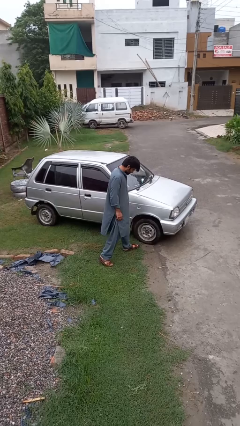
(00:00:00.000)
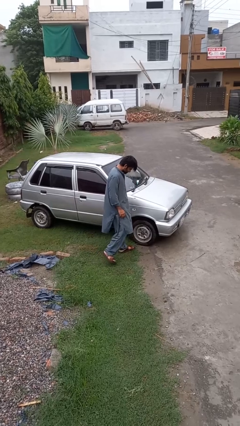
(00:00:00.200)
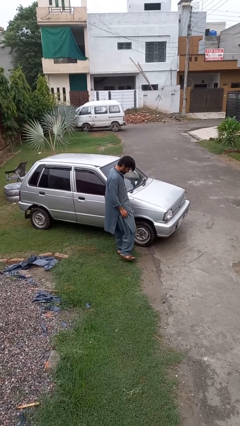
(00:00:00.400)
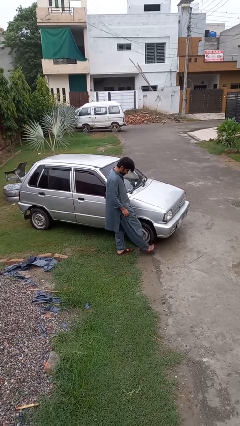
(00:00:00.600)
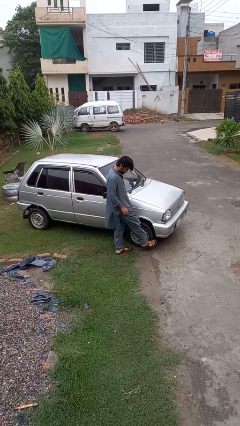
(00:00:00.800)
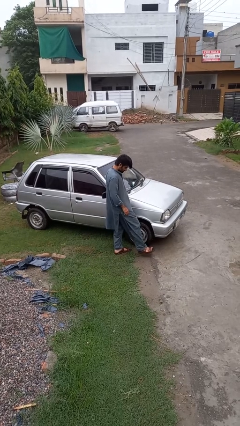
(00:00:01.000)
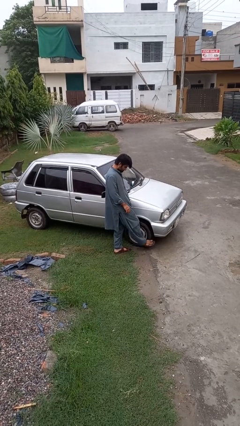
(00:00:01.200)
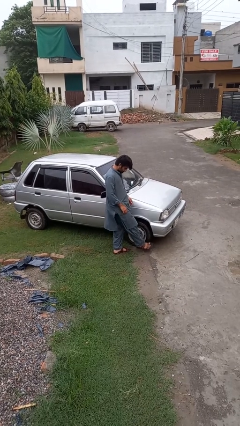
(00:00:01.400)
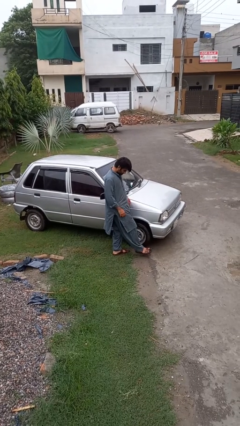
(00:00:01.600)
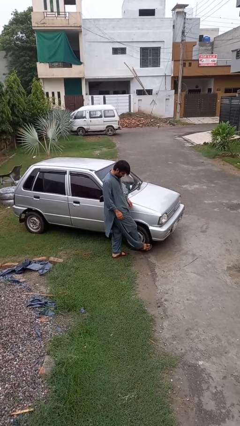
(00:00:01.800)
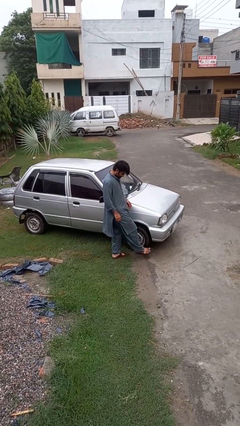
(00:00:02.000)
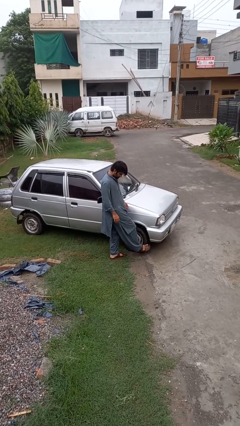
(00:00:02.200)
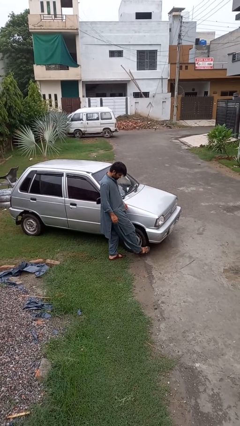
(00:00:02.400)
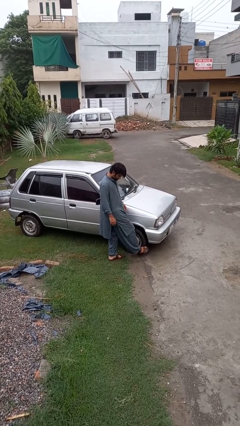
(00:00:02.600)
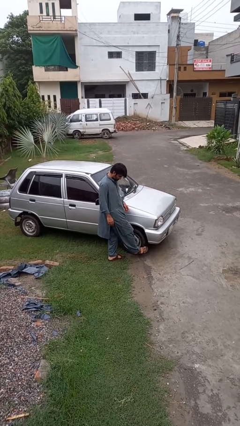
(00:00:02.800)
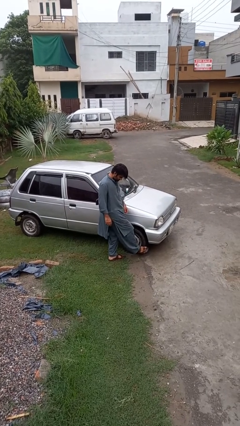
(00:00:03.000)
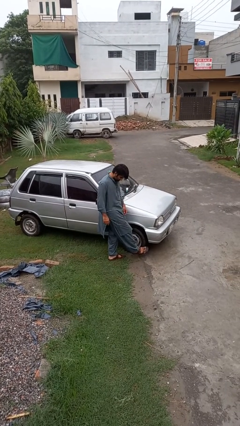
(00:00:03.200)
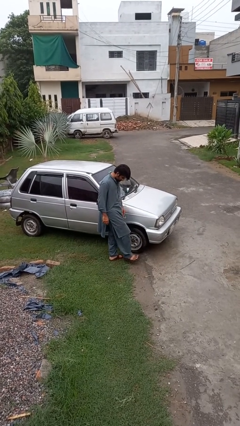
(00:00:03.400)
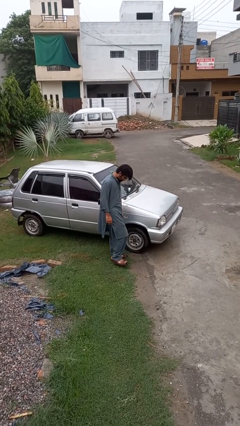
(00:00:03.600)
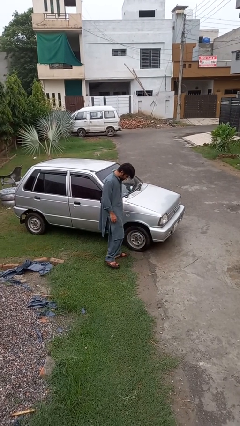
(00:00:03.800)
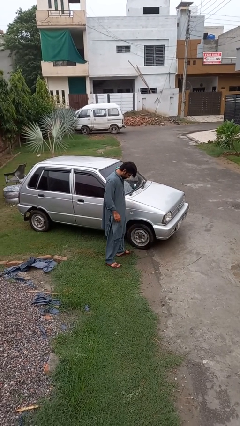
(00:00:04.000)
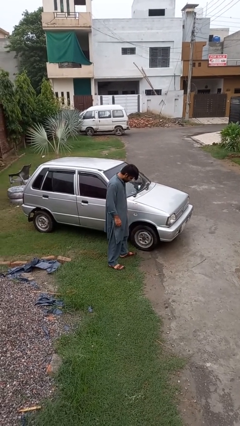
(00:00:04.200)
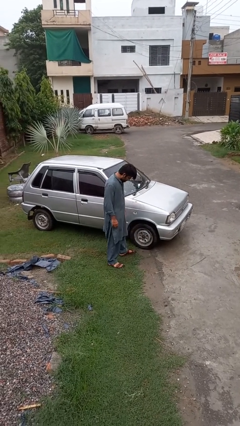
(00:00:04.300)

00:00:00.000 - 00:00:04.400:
person kicks car tires

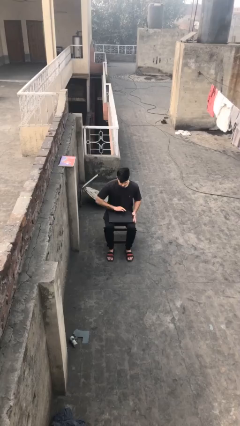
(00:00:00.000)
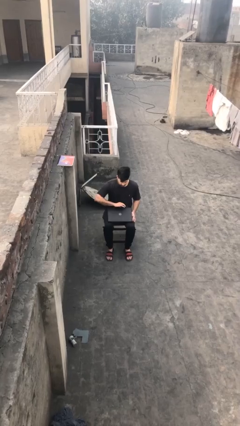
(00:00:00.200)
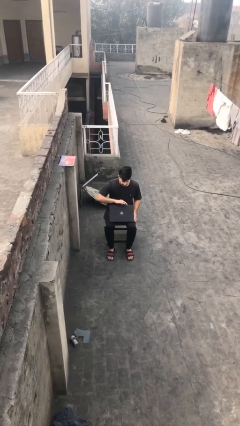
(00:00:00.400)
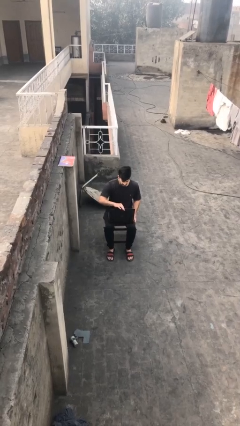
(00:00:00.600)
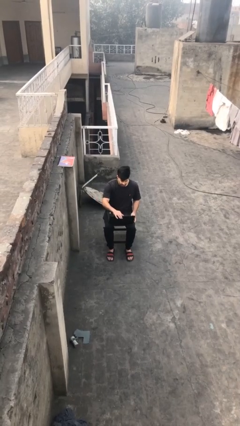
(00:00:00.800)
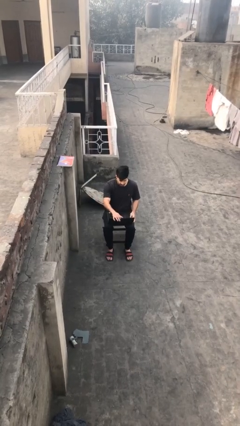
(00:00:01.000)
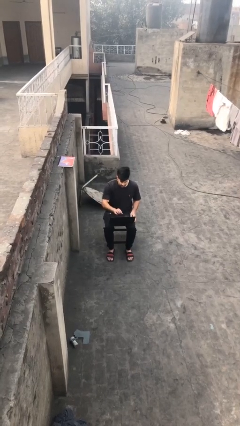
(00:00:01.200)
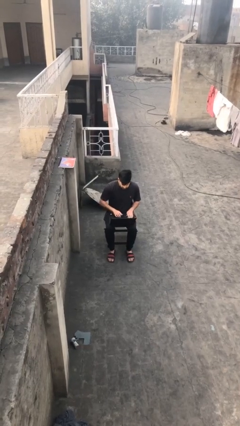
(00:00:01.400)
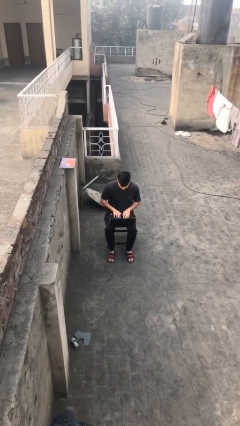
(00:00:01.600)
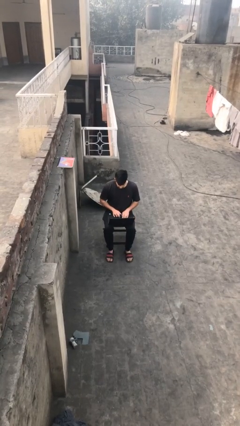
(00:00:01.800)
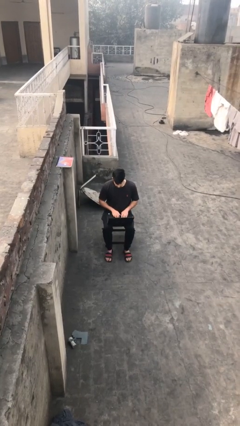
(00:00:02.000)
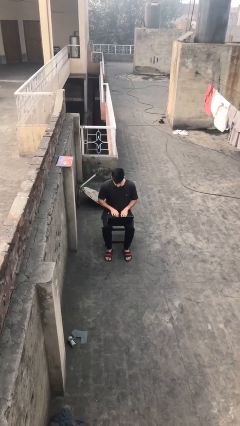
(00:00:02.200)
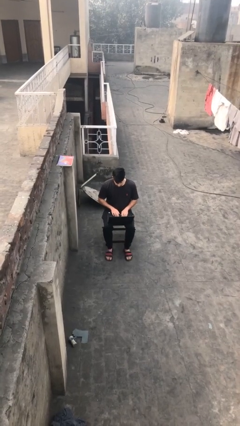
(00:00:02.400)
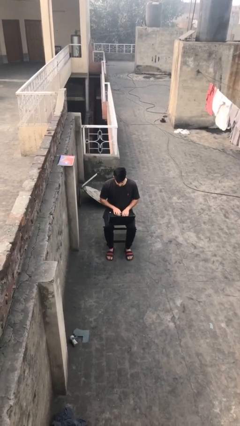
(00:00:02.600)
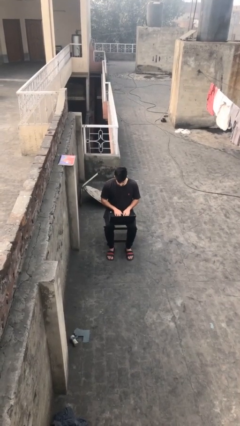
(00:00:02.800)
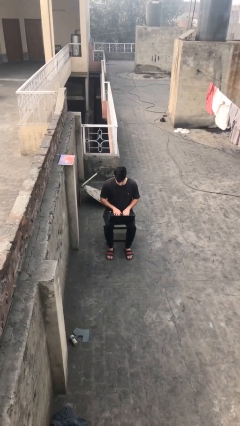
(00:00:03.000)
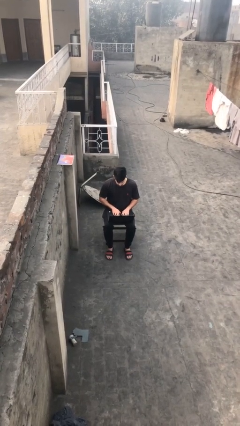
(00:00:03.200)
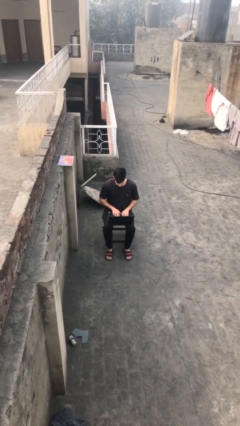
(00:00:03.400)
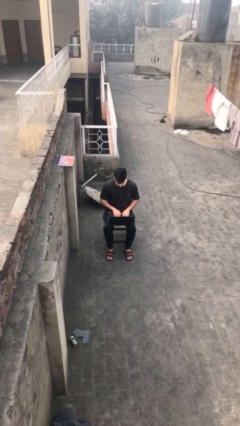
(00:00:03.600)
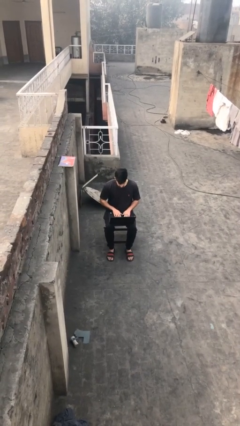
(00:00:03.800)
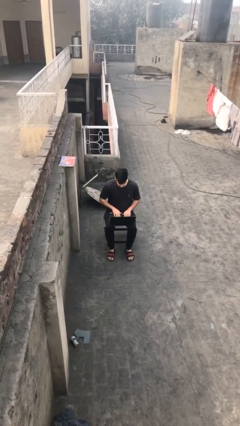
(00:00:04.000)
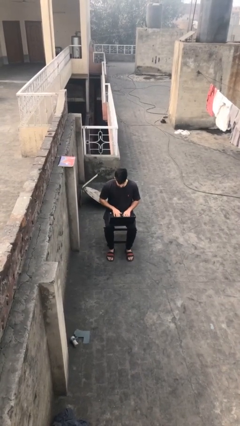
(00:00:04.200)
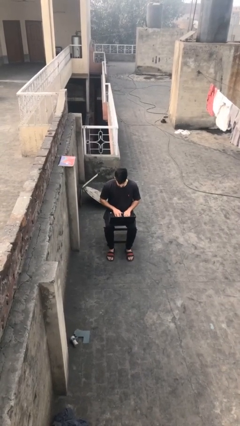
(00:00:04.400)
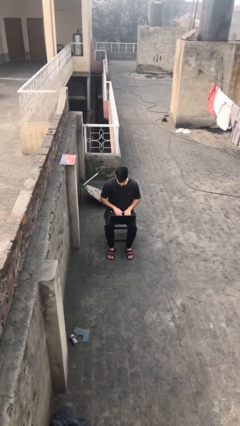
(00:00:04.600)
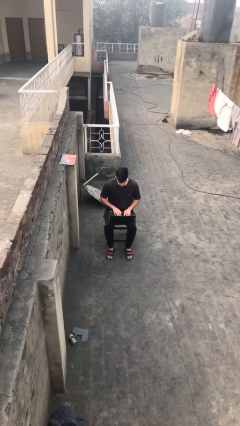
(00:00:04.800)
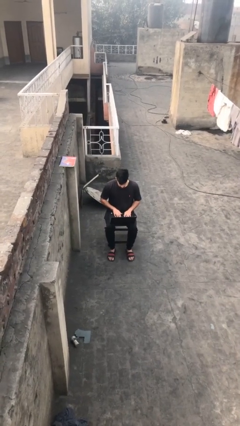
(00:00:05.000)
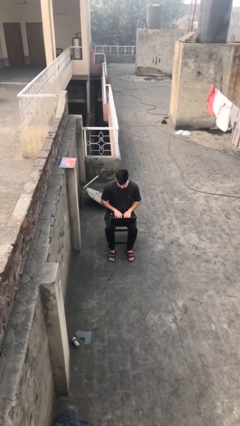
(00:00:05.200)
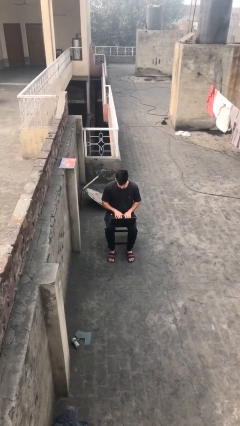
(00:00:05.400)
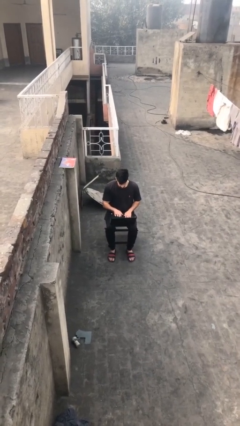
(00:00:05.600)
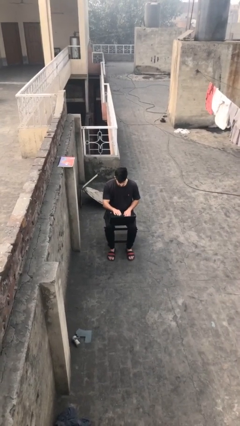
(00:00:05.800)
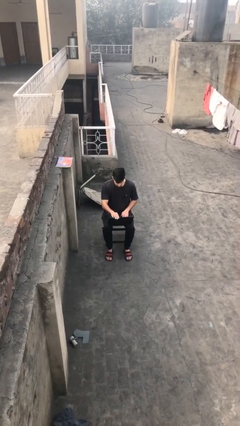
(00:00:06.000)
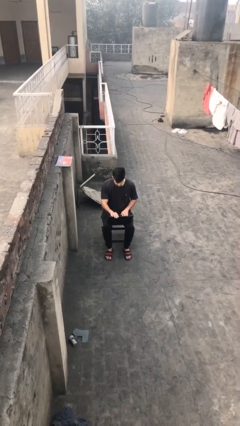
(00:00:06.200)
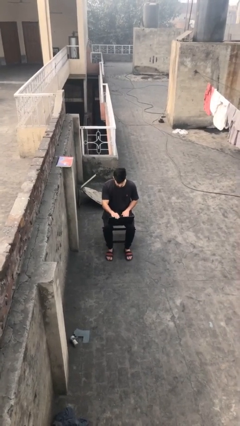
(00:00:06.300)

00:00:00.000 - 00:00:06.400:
person interacts with laptop

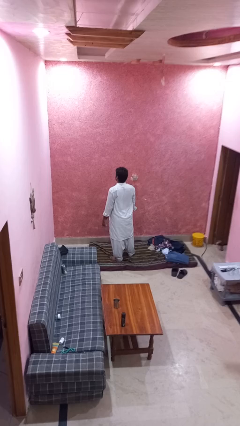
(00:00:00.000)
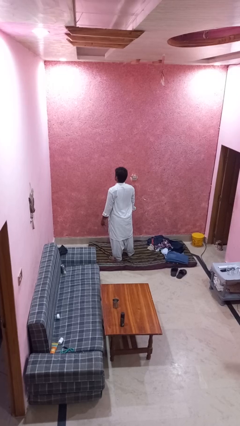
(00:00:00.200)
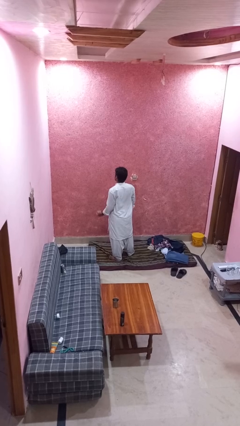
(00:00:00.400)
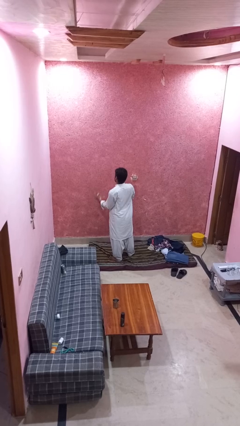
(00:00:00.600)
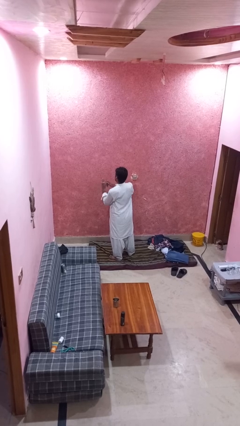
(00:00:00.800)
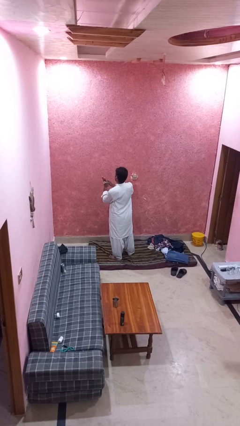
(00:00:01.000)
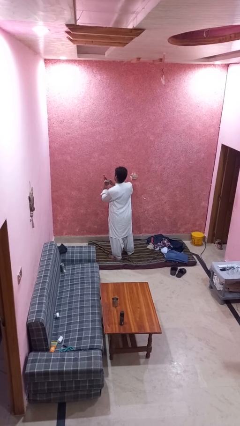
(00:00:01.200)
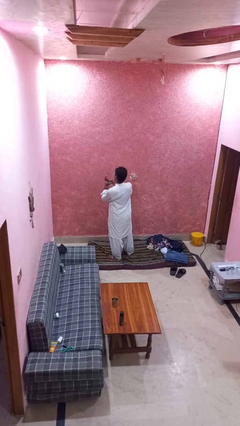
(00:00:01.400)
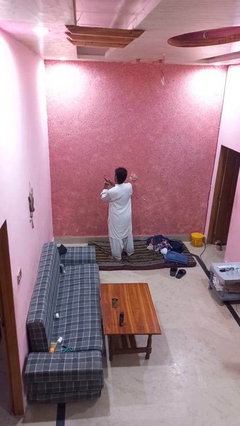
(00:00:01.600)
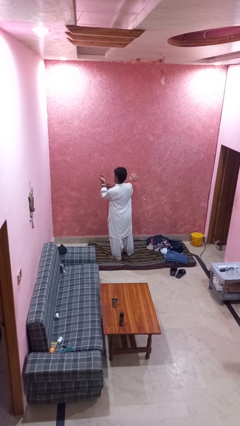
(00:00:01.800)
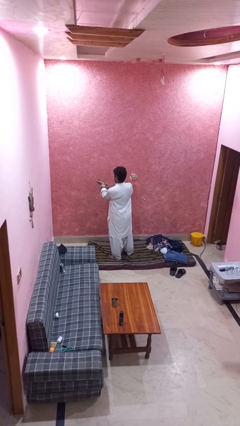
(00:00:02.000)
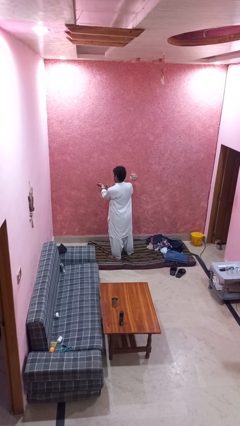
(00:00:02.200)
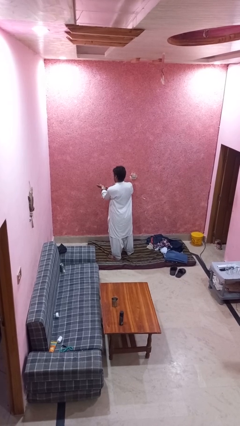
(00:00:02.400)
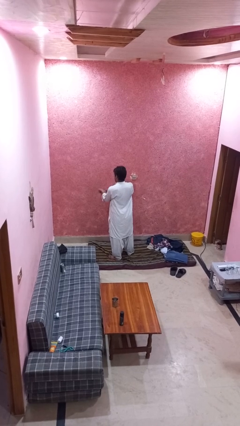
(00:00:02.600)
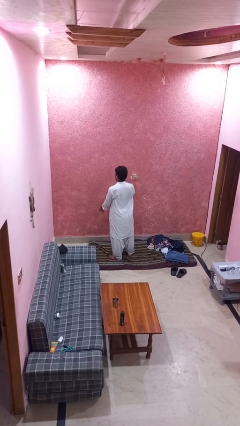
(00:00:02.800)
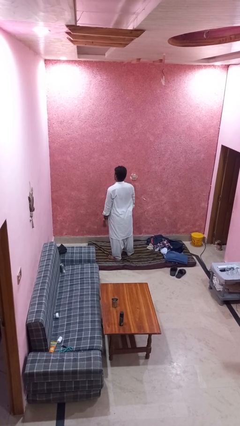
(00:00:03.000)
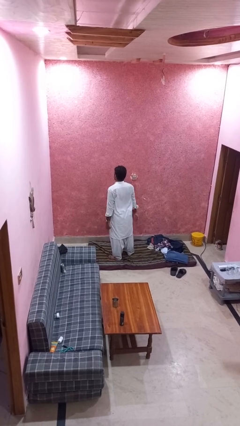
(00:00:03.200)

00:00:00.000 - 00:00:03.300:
person puts on wristwatch

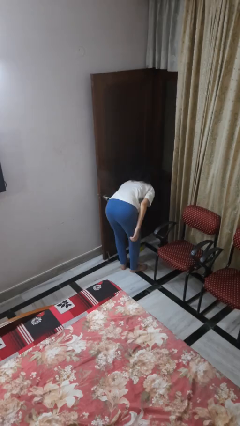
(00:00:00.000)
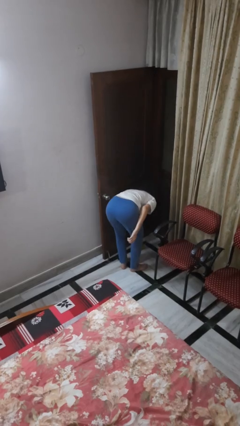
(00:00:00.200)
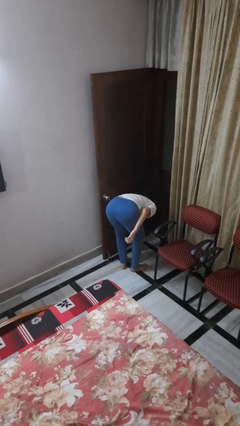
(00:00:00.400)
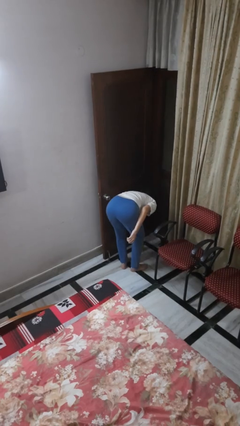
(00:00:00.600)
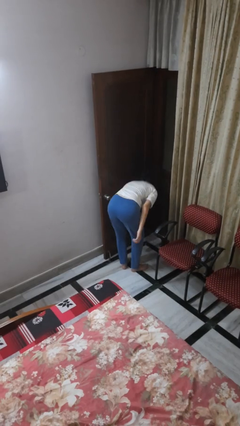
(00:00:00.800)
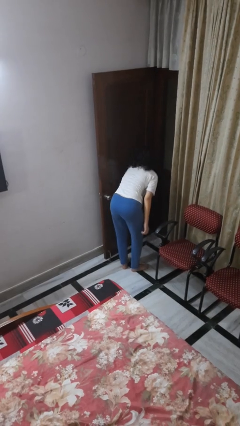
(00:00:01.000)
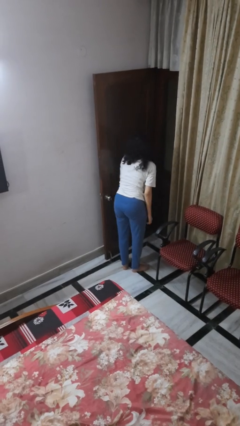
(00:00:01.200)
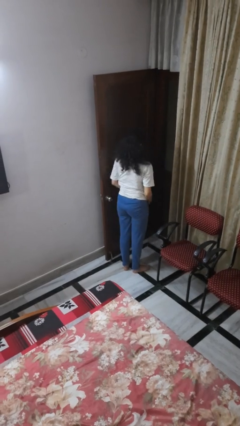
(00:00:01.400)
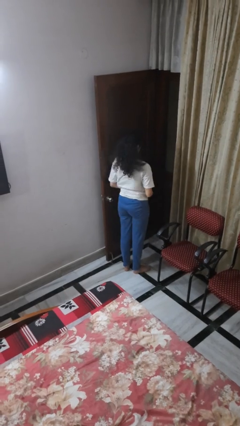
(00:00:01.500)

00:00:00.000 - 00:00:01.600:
person picks up object from floor

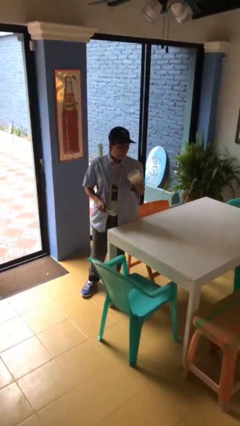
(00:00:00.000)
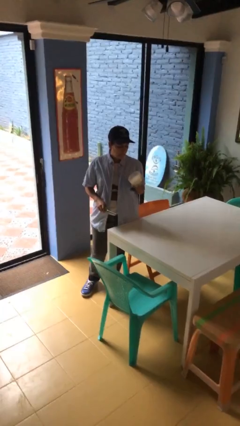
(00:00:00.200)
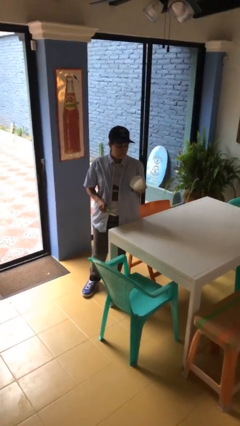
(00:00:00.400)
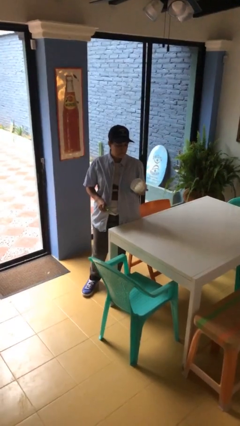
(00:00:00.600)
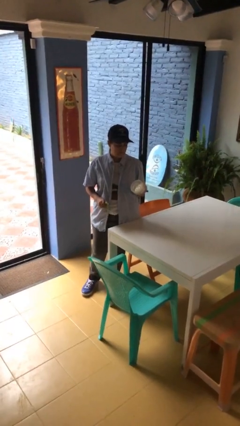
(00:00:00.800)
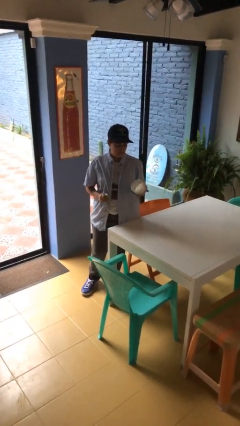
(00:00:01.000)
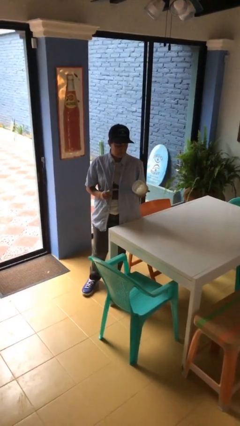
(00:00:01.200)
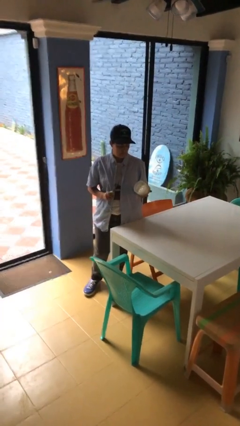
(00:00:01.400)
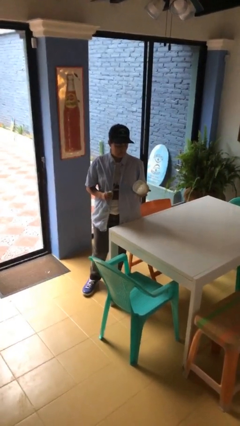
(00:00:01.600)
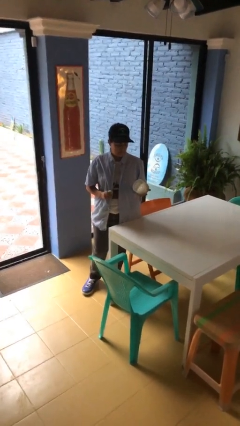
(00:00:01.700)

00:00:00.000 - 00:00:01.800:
person extinguishes candle
